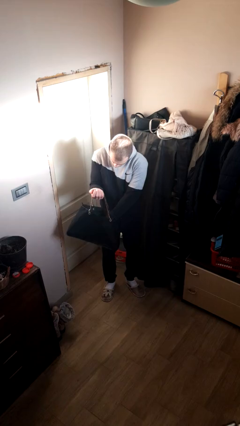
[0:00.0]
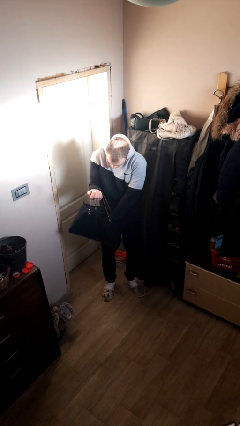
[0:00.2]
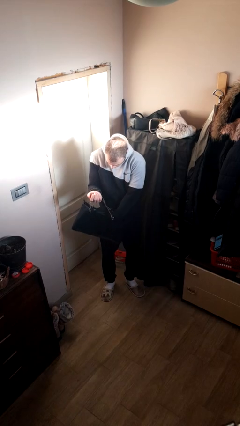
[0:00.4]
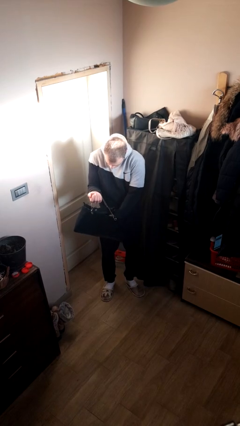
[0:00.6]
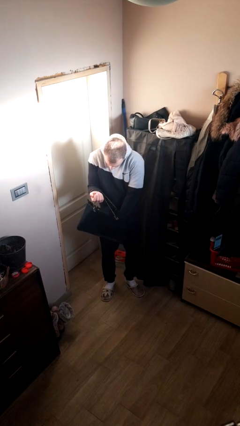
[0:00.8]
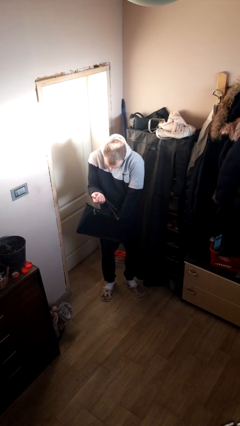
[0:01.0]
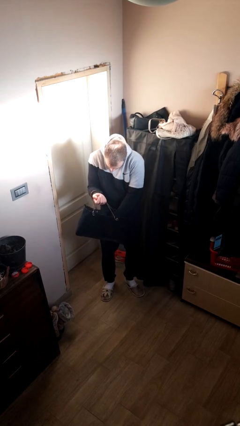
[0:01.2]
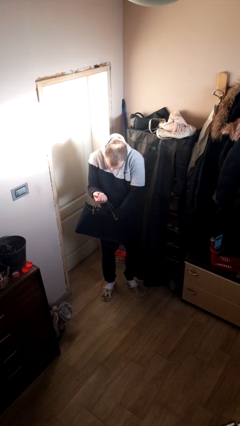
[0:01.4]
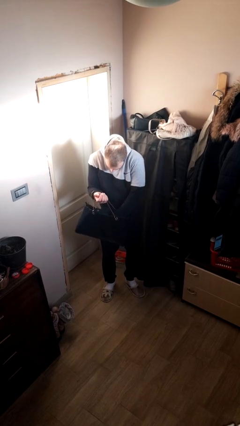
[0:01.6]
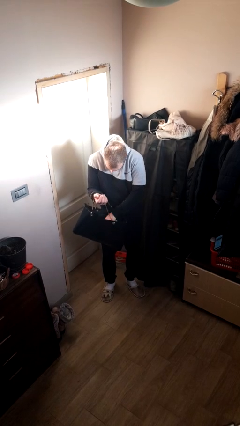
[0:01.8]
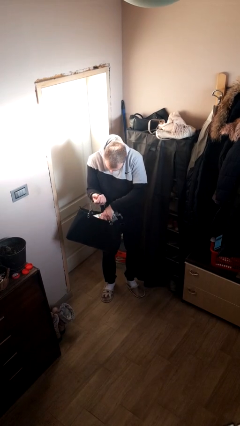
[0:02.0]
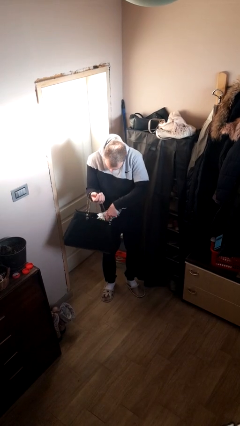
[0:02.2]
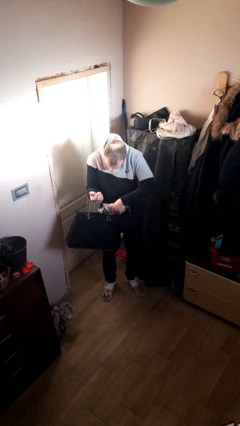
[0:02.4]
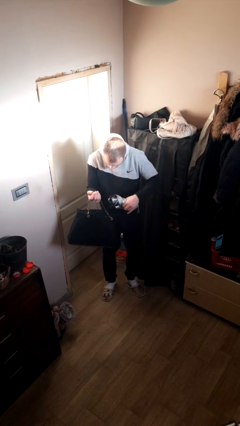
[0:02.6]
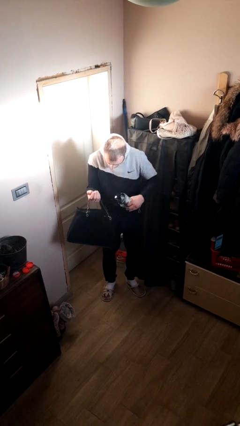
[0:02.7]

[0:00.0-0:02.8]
person searches in purse

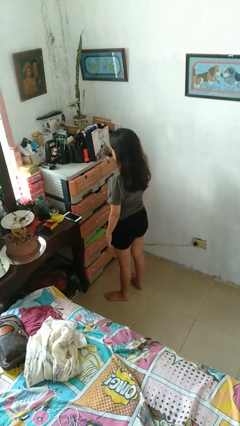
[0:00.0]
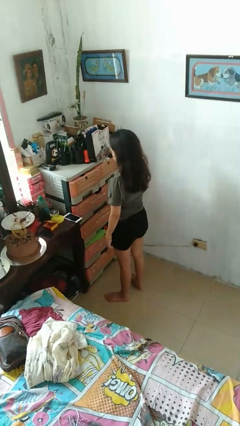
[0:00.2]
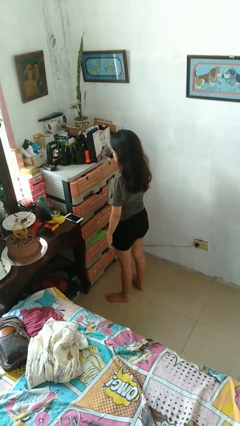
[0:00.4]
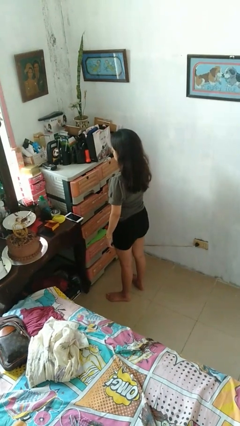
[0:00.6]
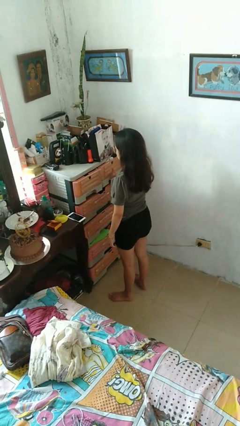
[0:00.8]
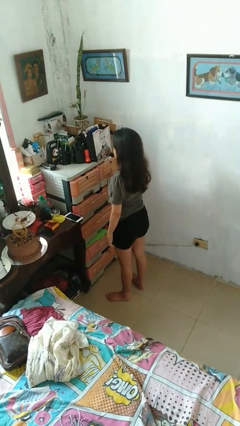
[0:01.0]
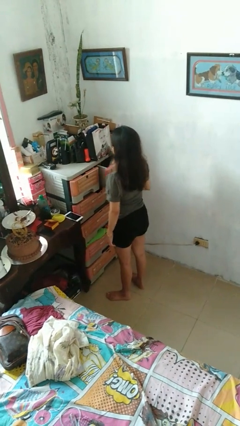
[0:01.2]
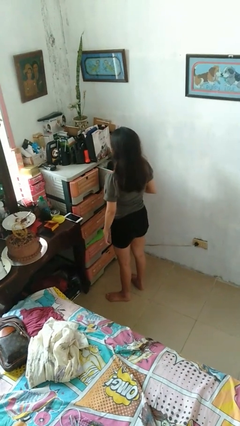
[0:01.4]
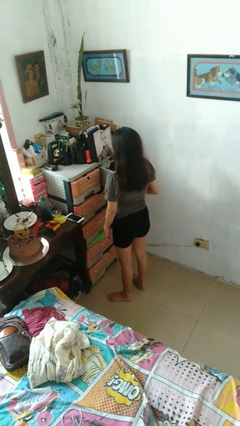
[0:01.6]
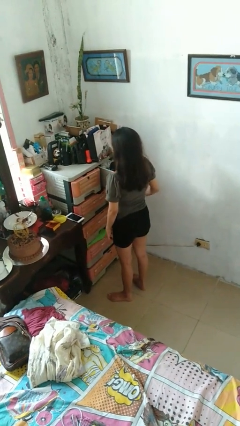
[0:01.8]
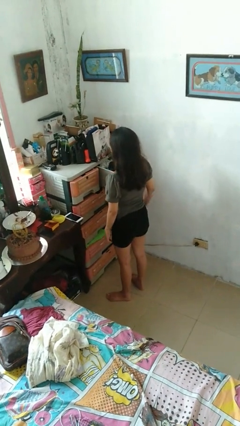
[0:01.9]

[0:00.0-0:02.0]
person opens dresser drawer

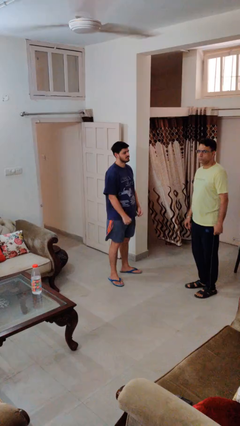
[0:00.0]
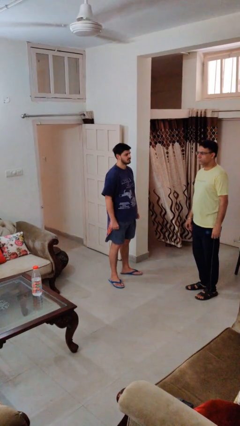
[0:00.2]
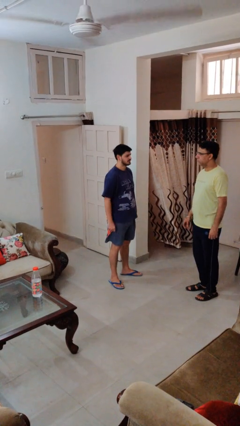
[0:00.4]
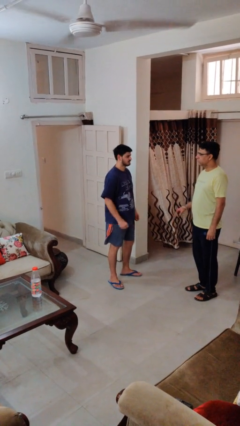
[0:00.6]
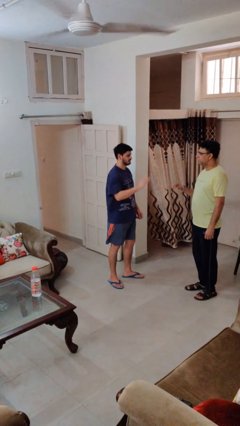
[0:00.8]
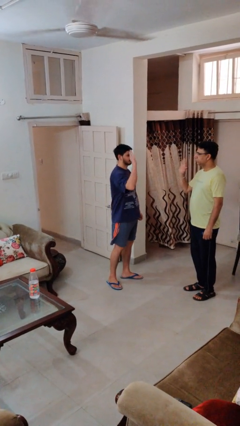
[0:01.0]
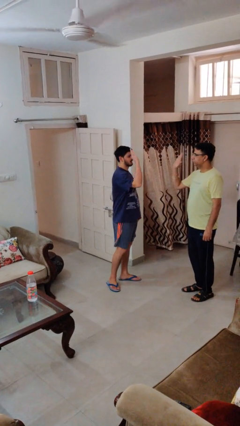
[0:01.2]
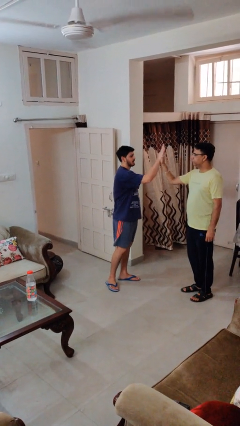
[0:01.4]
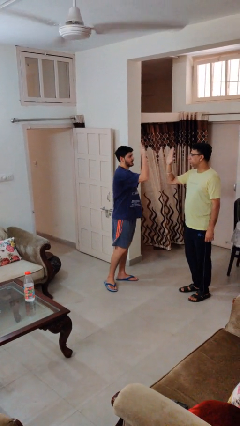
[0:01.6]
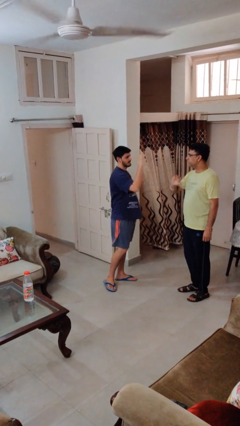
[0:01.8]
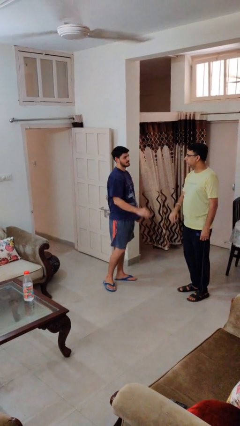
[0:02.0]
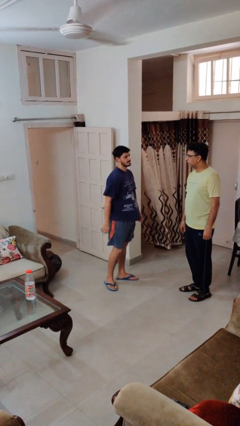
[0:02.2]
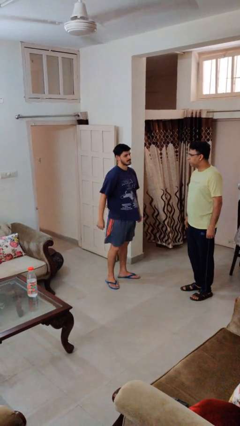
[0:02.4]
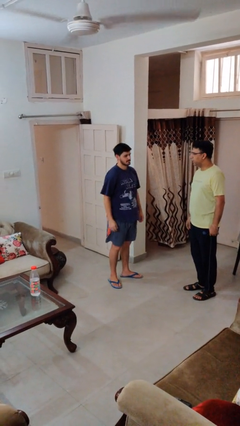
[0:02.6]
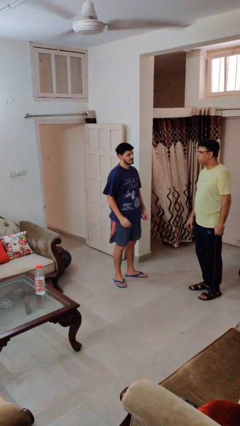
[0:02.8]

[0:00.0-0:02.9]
person highfives hand

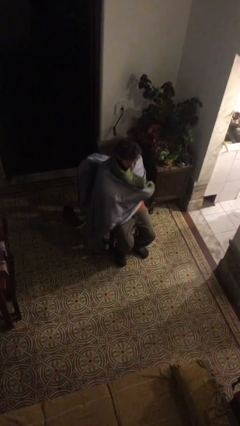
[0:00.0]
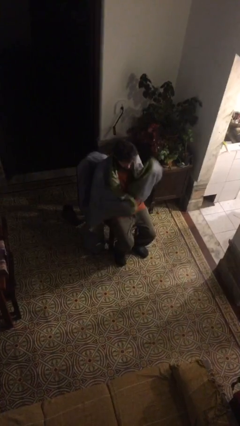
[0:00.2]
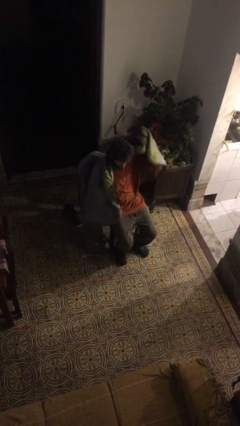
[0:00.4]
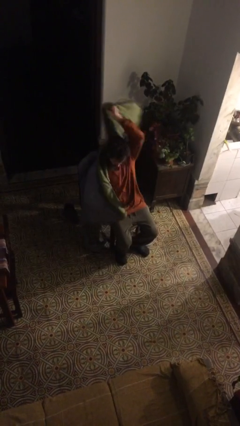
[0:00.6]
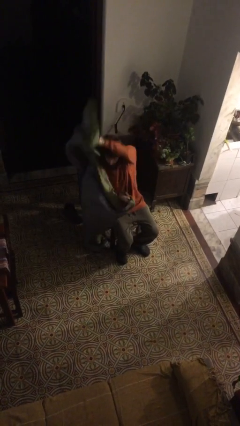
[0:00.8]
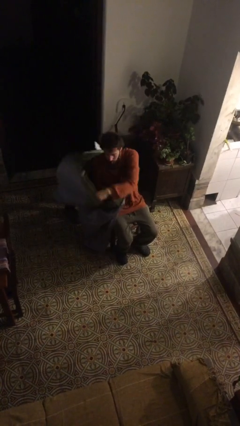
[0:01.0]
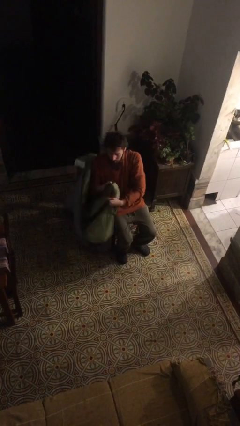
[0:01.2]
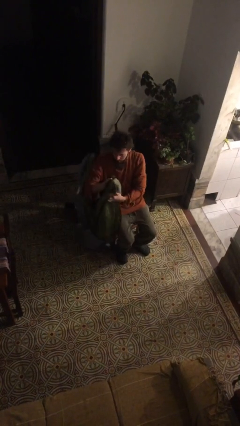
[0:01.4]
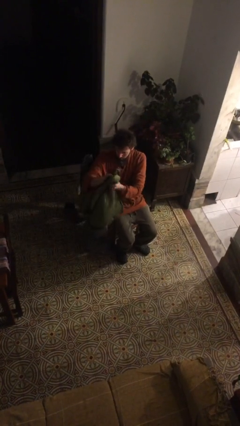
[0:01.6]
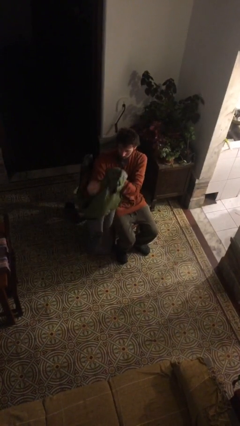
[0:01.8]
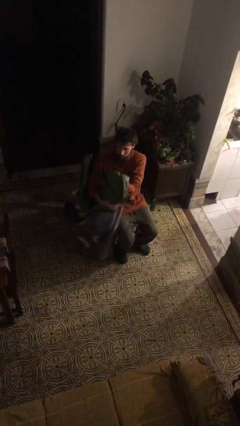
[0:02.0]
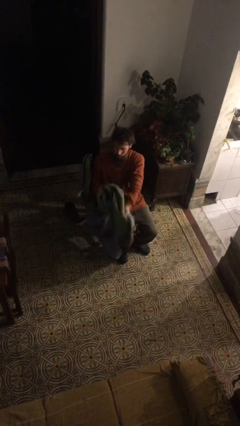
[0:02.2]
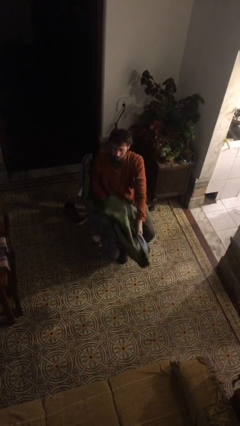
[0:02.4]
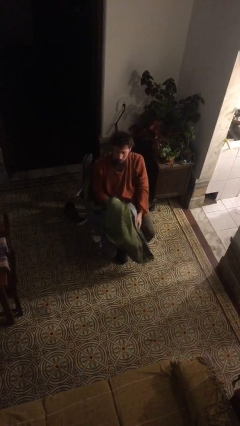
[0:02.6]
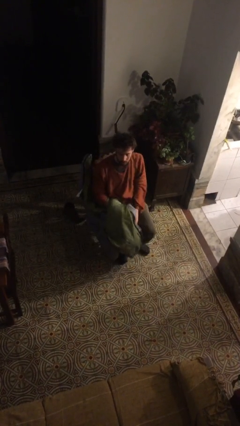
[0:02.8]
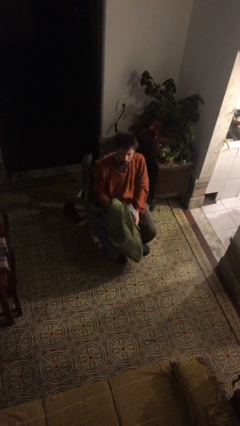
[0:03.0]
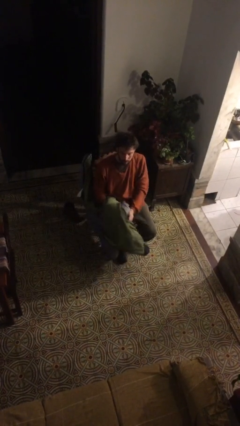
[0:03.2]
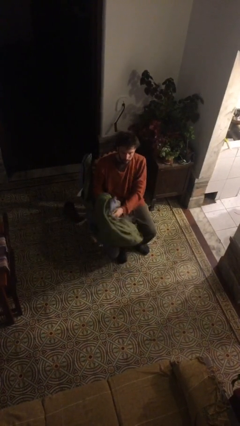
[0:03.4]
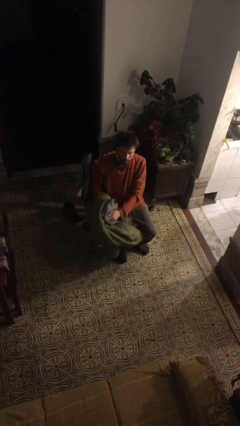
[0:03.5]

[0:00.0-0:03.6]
person uncovers with blanket

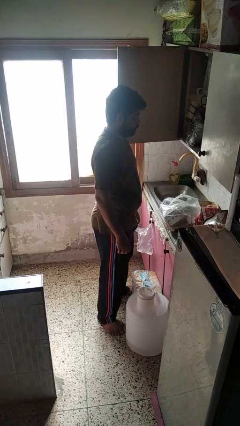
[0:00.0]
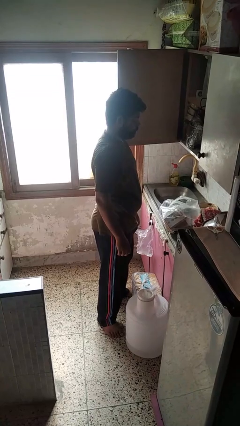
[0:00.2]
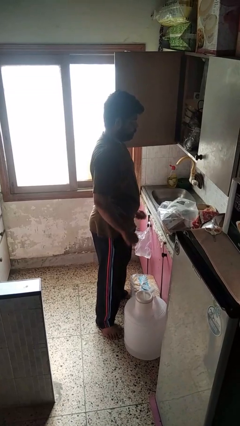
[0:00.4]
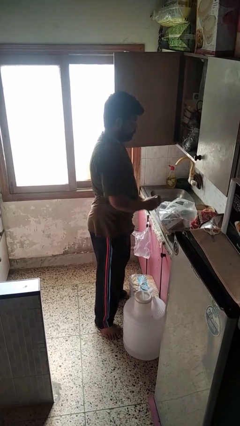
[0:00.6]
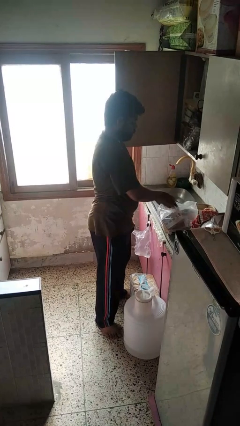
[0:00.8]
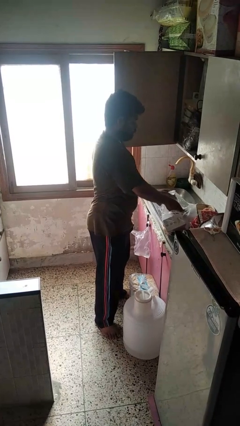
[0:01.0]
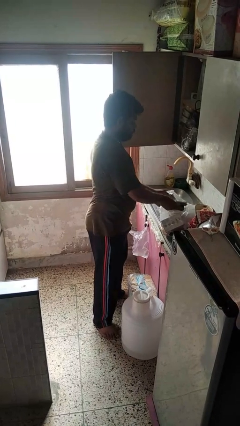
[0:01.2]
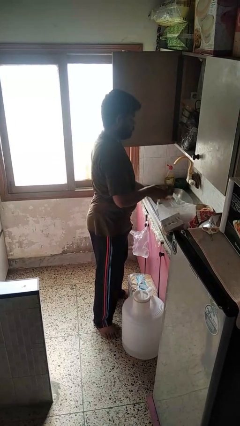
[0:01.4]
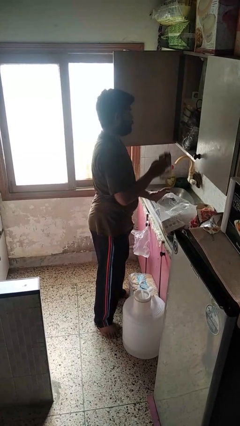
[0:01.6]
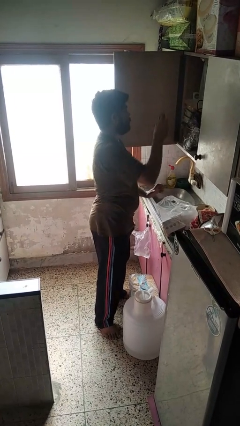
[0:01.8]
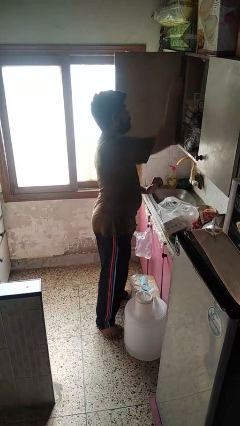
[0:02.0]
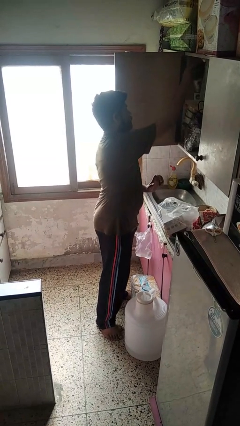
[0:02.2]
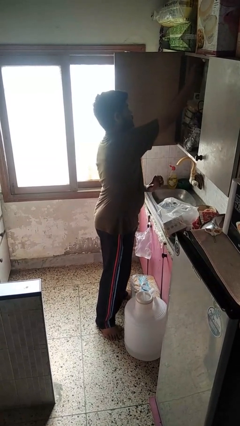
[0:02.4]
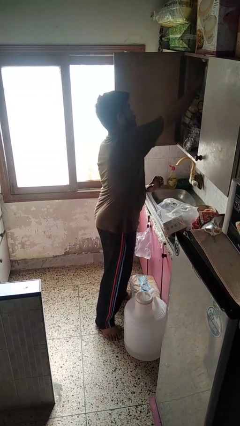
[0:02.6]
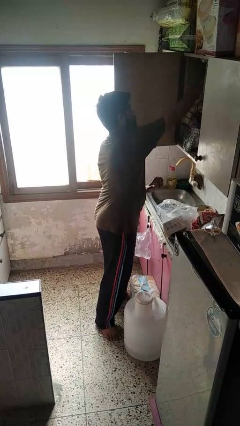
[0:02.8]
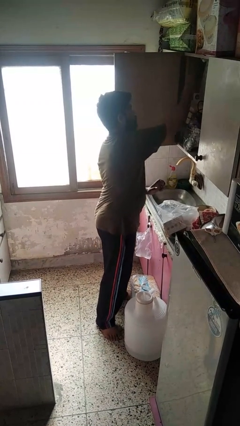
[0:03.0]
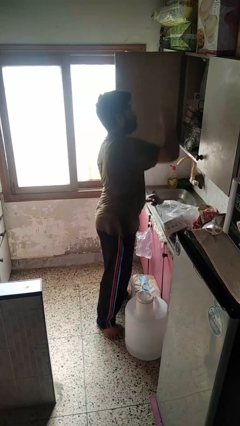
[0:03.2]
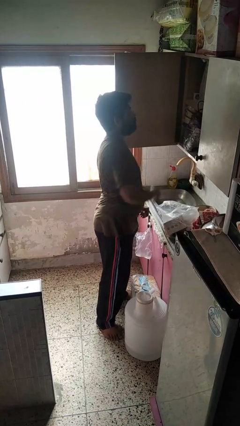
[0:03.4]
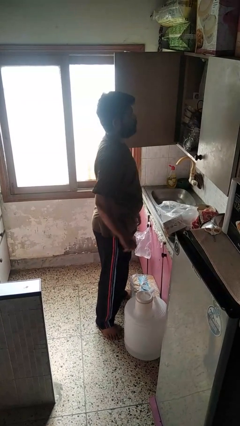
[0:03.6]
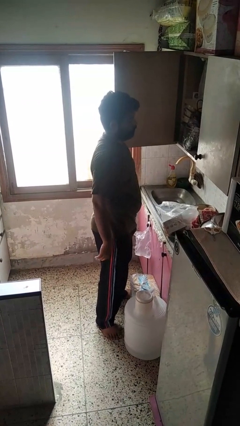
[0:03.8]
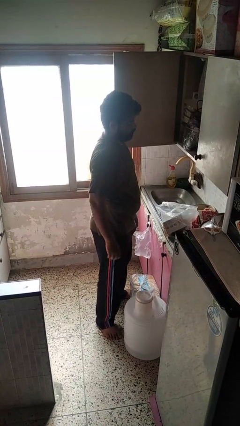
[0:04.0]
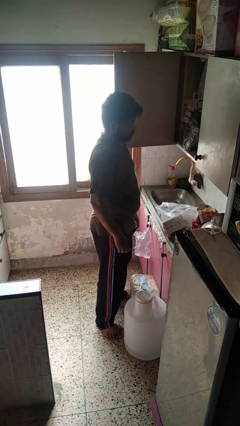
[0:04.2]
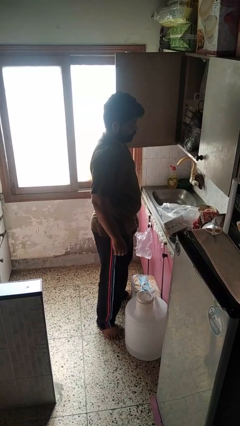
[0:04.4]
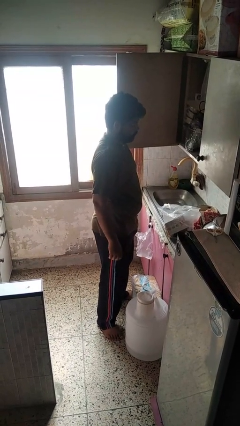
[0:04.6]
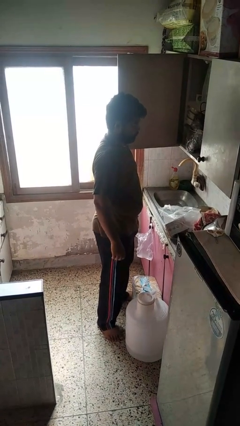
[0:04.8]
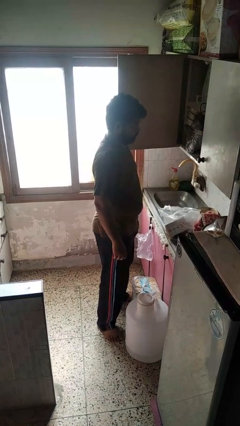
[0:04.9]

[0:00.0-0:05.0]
person loads groceries into cabinet

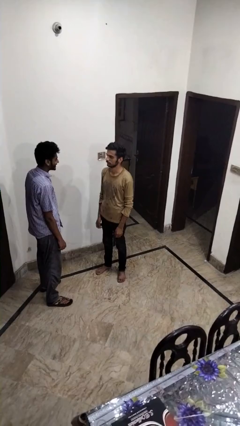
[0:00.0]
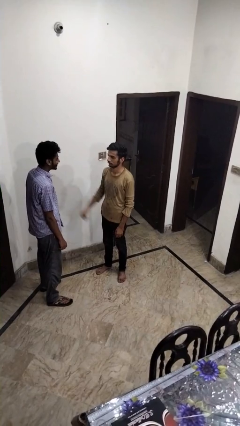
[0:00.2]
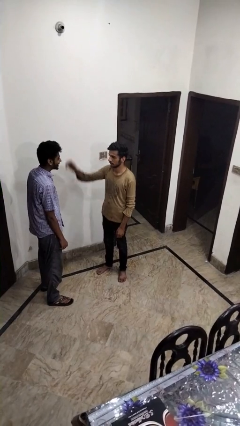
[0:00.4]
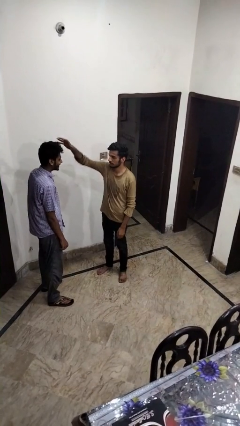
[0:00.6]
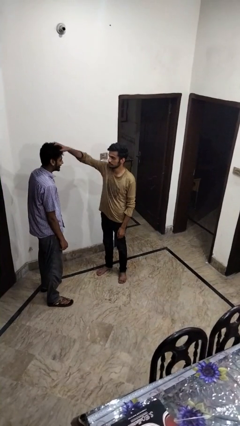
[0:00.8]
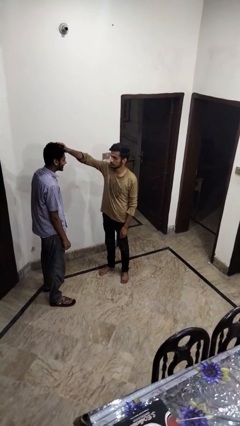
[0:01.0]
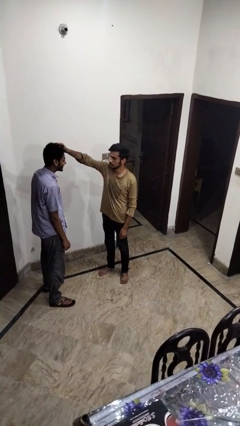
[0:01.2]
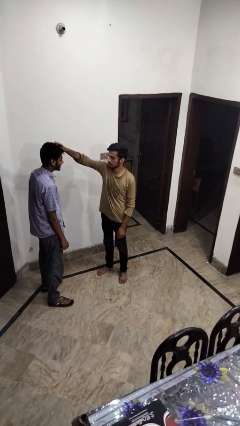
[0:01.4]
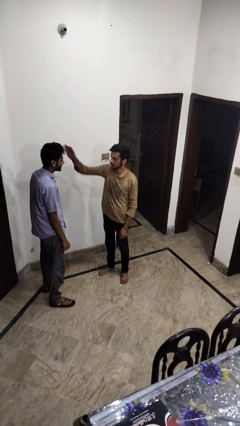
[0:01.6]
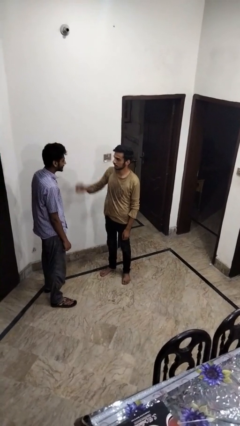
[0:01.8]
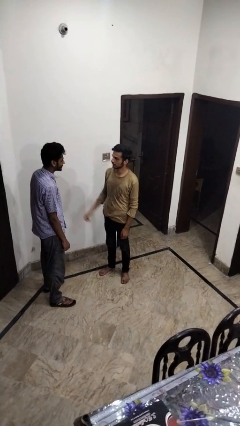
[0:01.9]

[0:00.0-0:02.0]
person grabs person by hair
